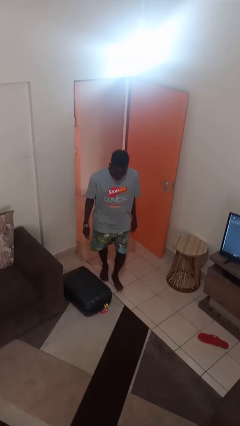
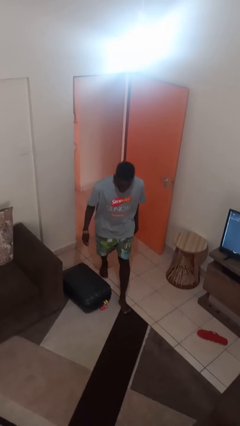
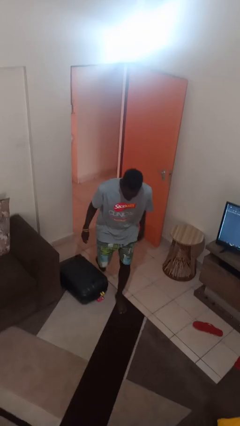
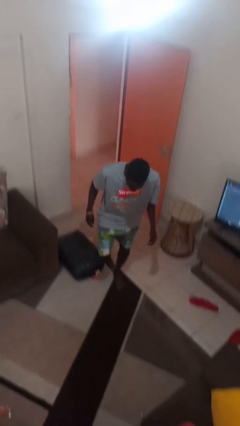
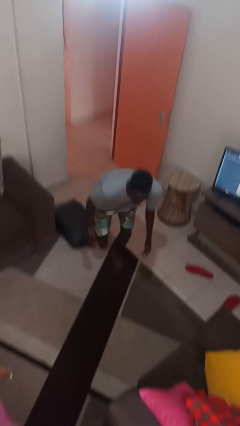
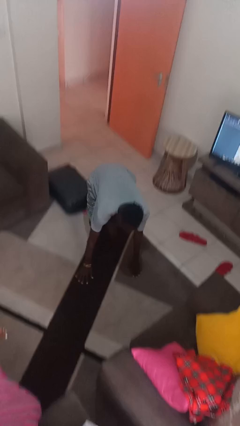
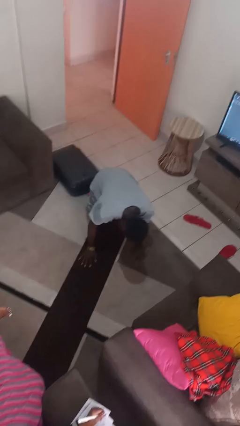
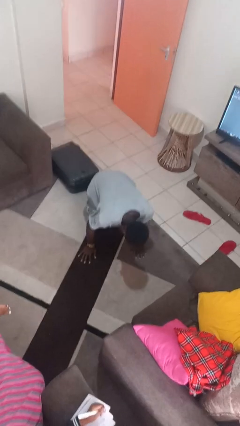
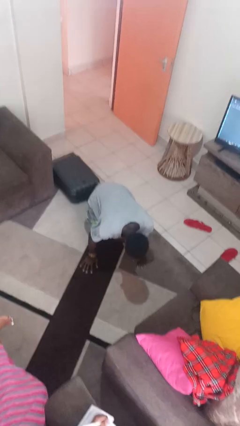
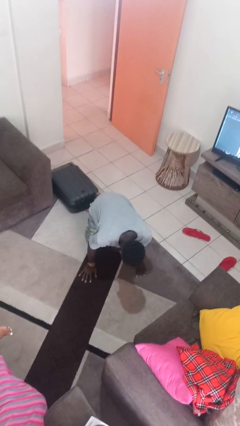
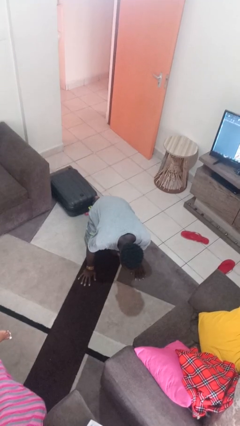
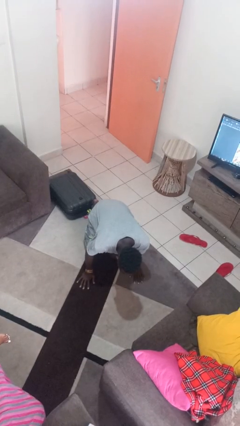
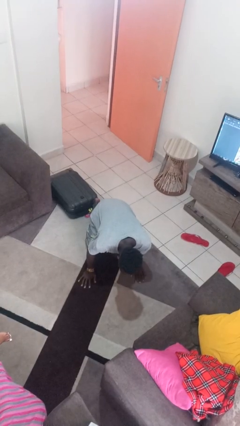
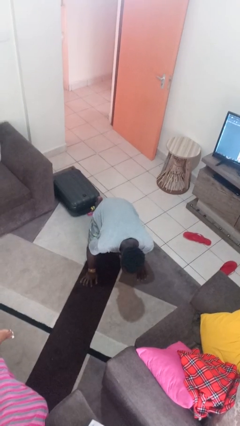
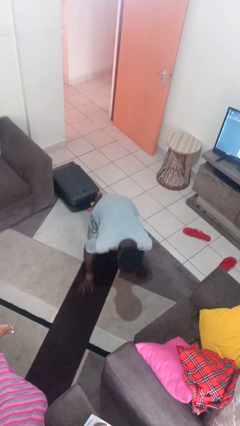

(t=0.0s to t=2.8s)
person trips on object on floor
